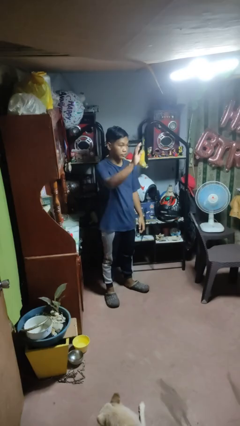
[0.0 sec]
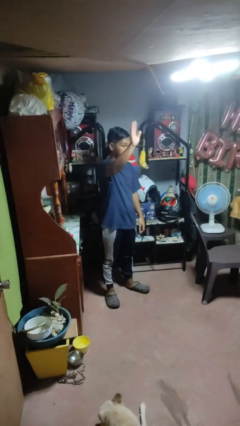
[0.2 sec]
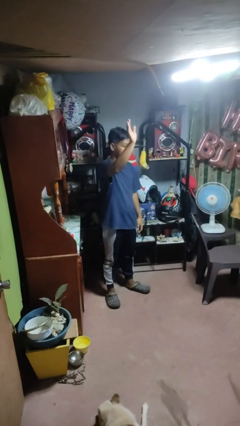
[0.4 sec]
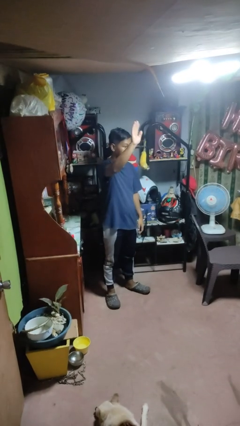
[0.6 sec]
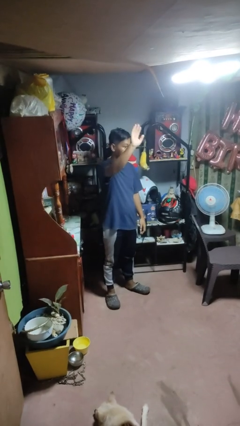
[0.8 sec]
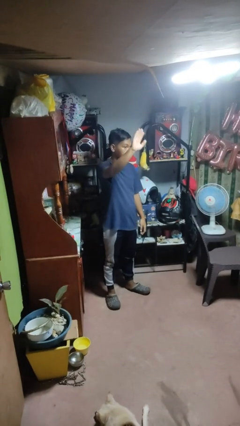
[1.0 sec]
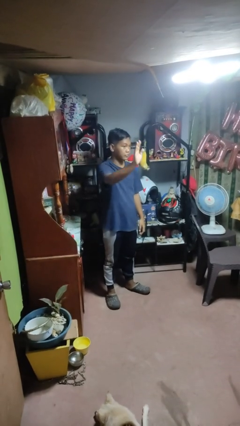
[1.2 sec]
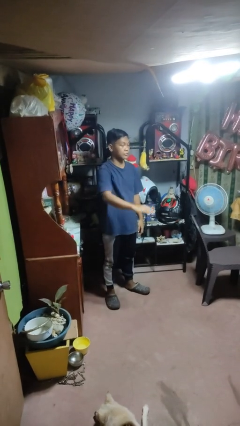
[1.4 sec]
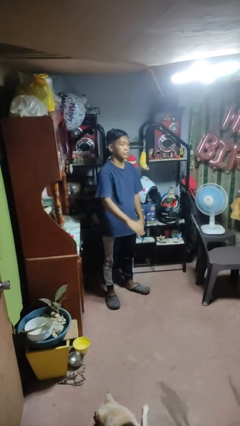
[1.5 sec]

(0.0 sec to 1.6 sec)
person waves at person

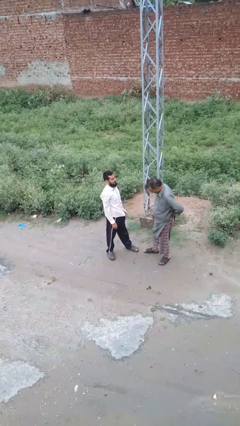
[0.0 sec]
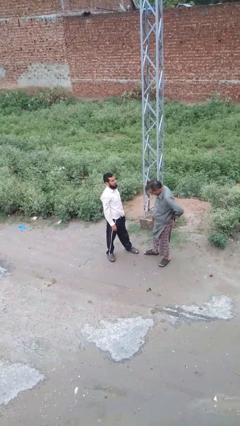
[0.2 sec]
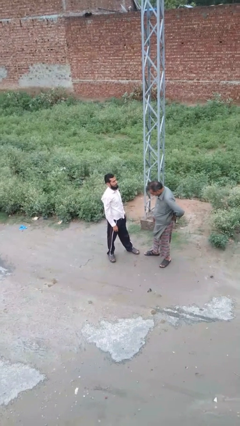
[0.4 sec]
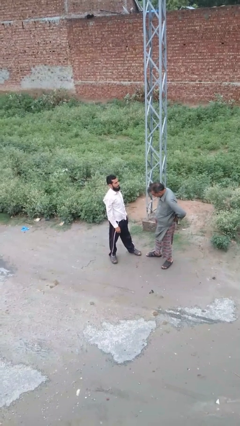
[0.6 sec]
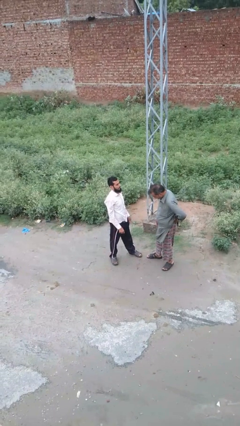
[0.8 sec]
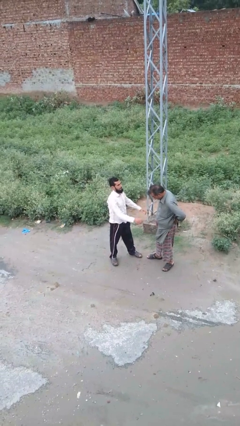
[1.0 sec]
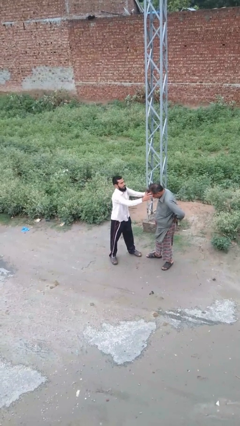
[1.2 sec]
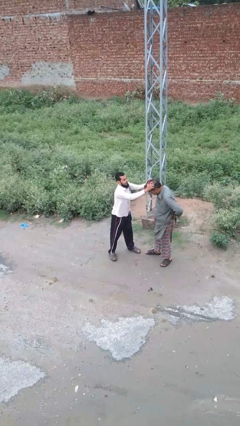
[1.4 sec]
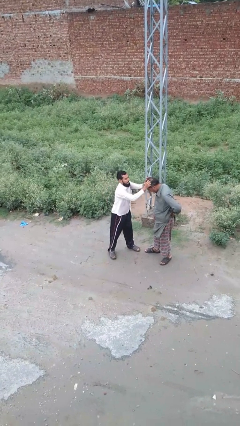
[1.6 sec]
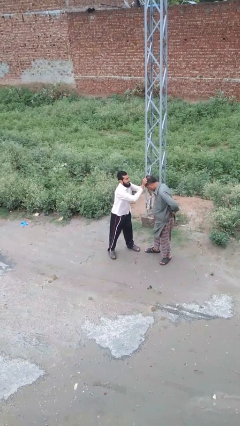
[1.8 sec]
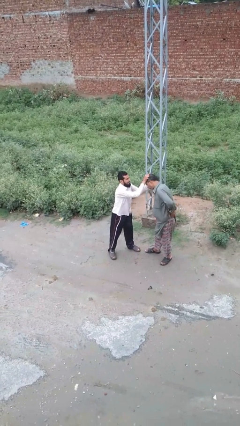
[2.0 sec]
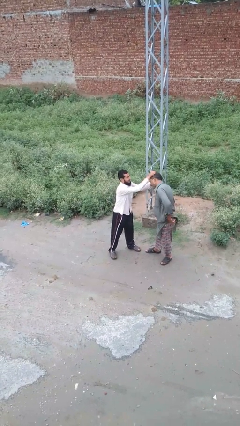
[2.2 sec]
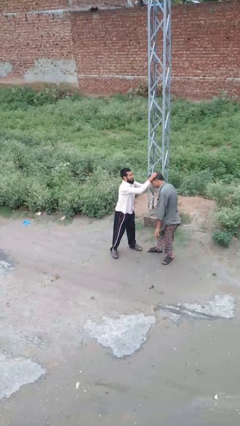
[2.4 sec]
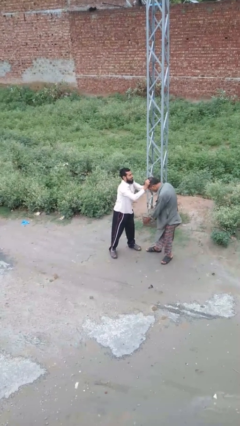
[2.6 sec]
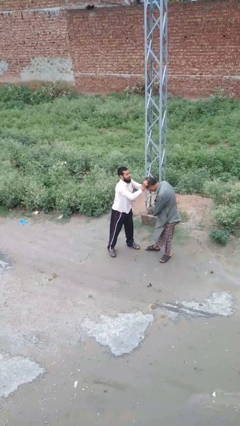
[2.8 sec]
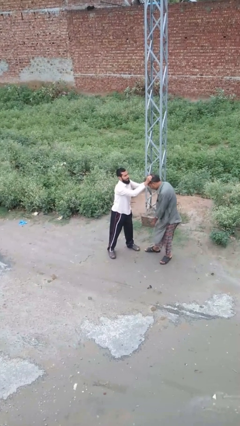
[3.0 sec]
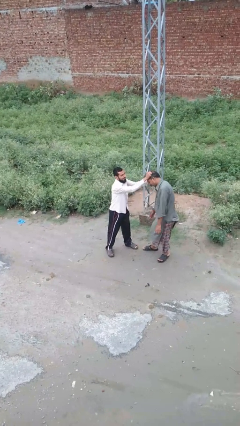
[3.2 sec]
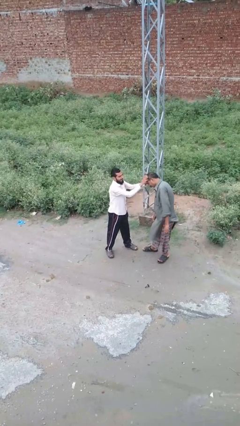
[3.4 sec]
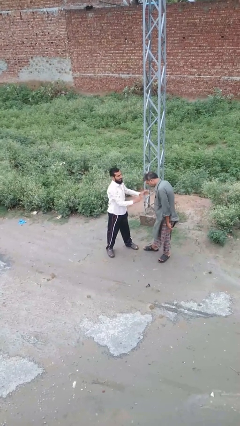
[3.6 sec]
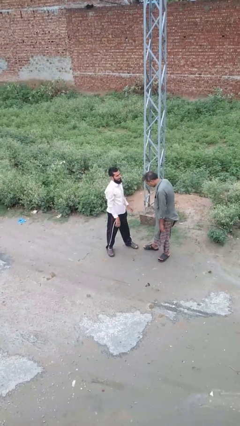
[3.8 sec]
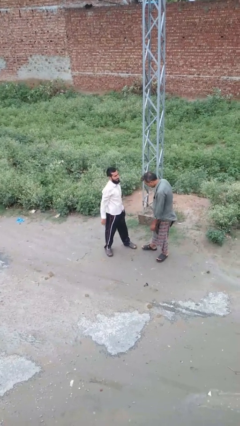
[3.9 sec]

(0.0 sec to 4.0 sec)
person grabs person by hair

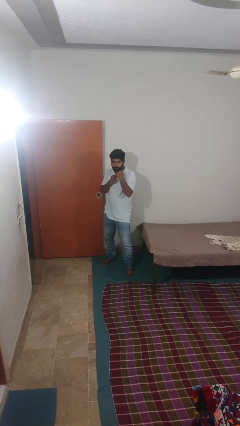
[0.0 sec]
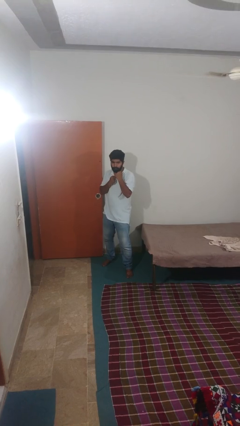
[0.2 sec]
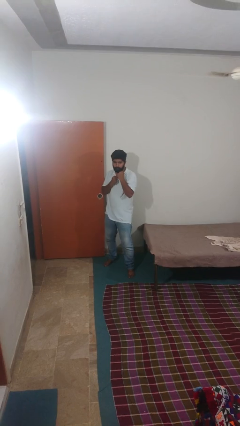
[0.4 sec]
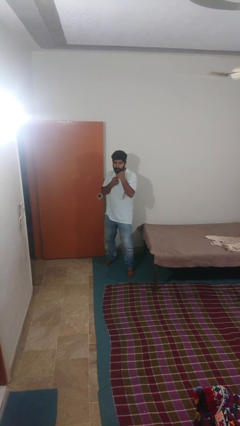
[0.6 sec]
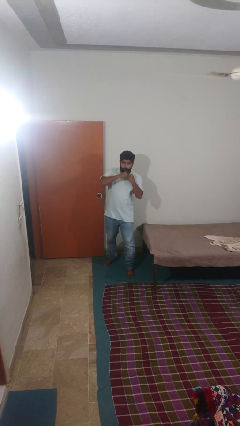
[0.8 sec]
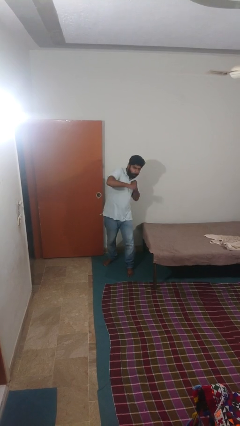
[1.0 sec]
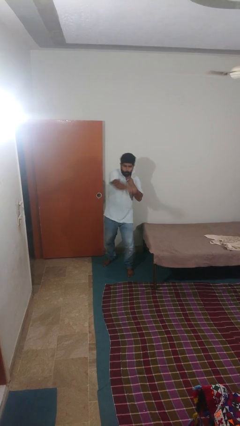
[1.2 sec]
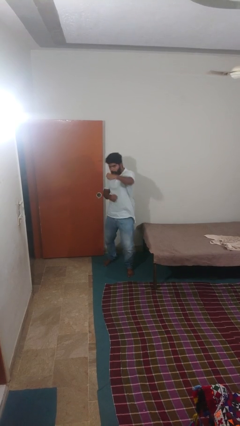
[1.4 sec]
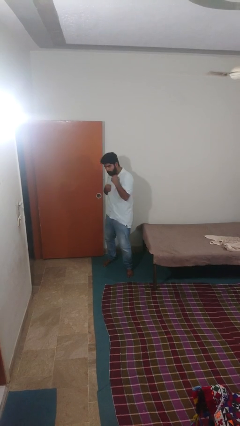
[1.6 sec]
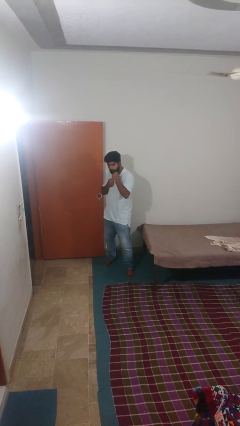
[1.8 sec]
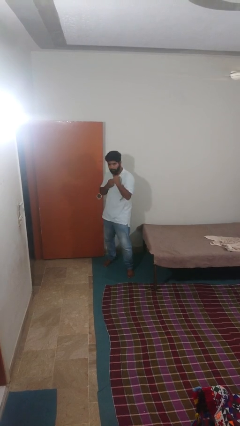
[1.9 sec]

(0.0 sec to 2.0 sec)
person punches

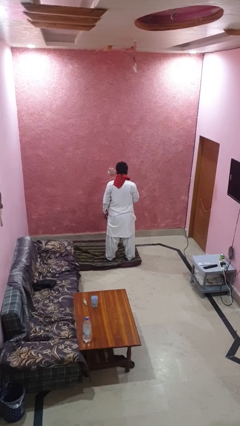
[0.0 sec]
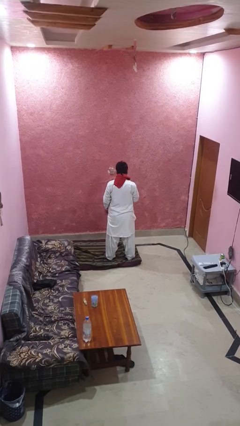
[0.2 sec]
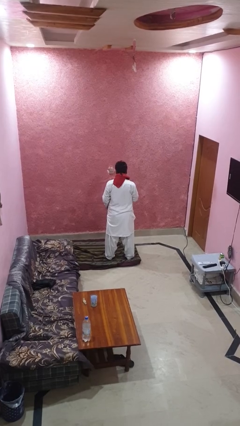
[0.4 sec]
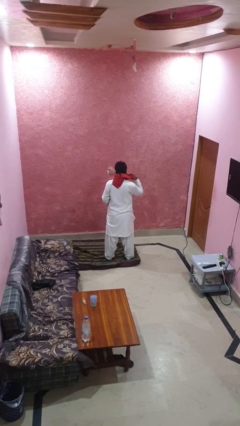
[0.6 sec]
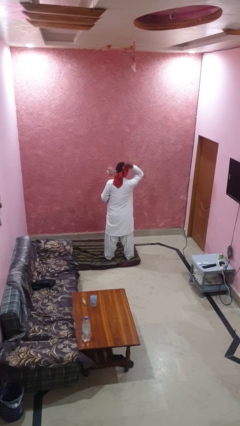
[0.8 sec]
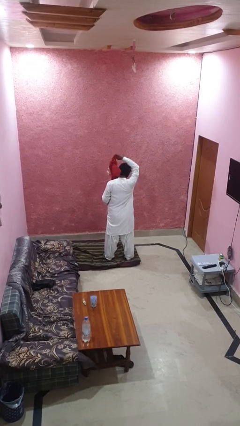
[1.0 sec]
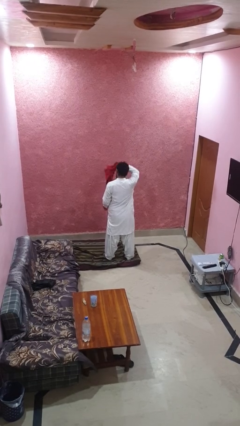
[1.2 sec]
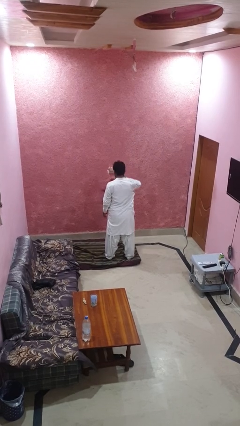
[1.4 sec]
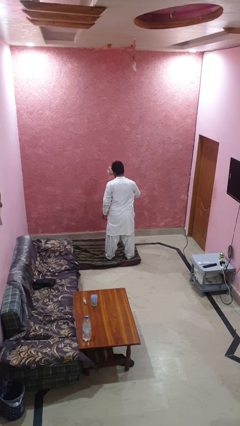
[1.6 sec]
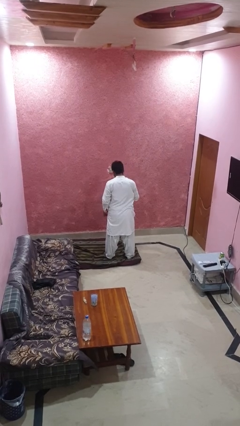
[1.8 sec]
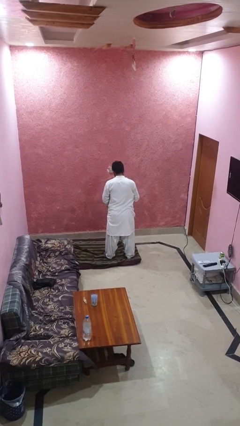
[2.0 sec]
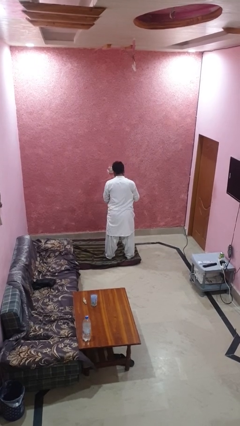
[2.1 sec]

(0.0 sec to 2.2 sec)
person takes off scarf

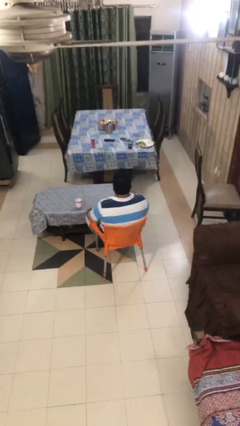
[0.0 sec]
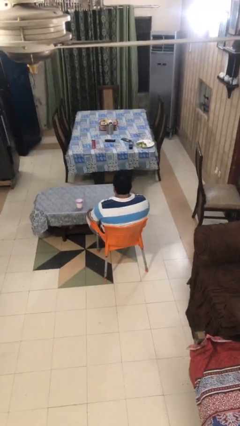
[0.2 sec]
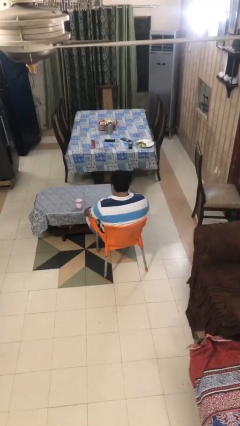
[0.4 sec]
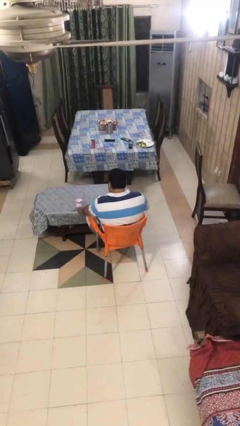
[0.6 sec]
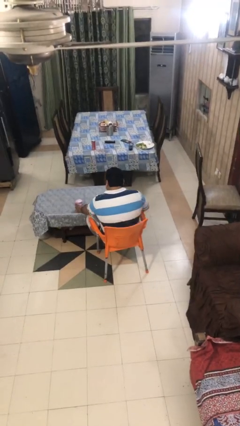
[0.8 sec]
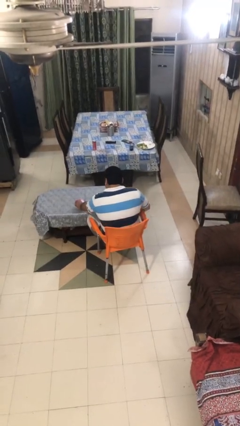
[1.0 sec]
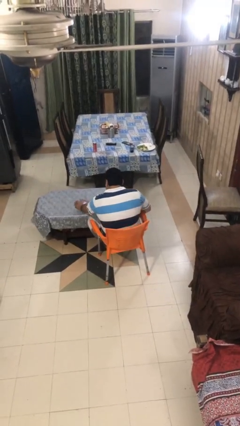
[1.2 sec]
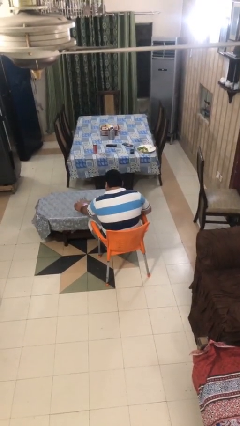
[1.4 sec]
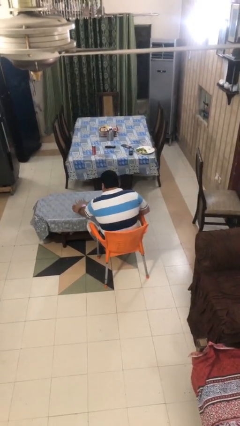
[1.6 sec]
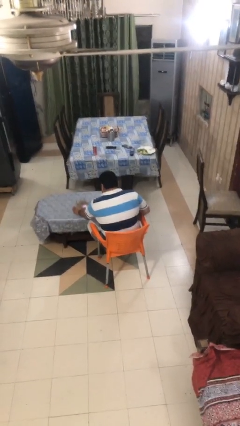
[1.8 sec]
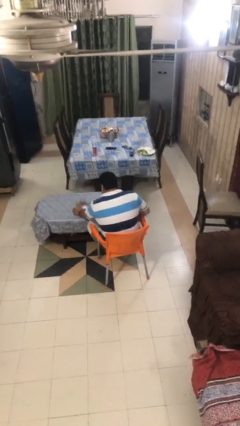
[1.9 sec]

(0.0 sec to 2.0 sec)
person spills on table

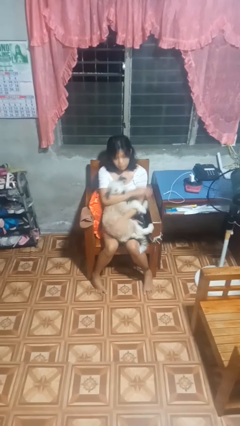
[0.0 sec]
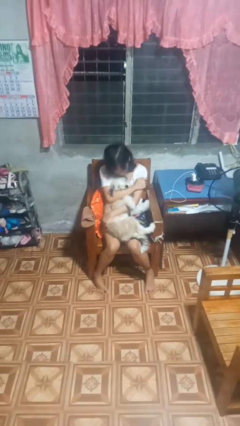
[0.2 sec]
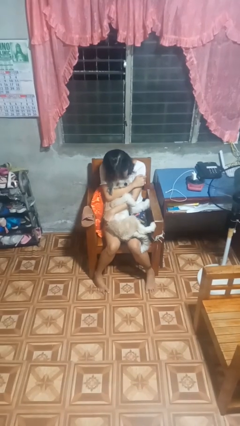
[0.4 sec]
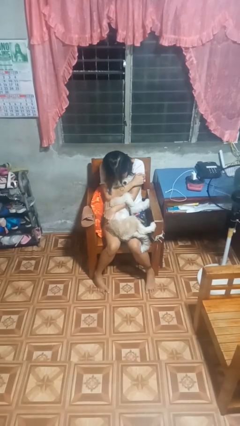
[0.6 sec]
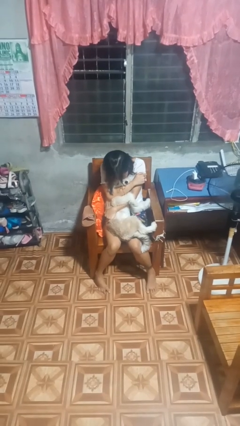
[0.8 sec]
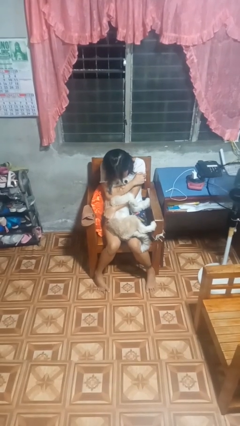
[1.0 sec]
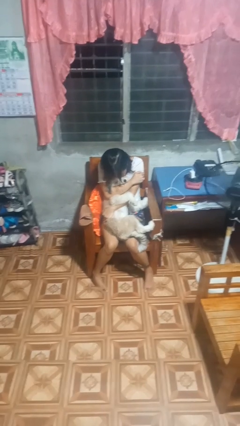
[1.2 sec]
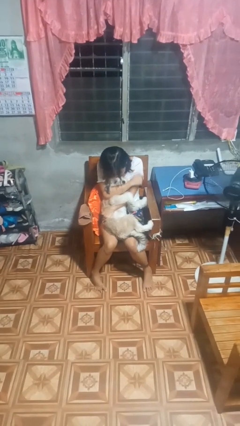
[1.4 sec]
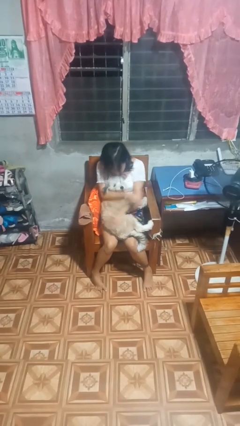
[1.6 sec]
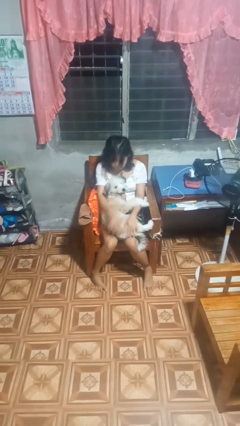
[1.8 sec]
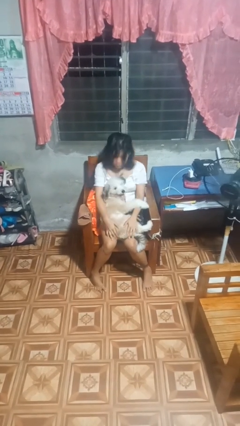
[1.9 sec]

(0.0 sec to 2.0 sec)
person hugs dog

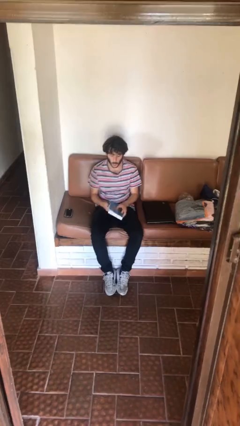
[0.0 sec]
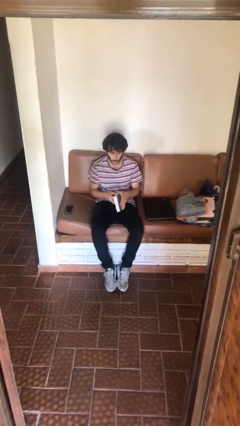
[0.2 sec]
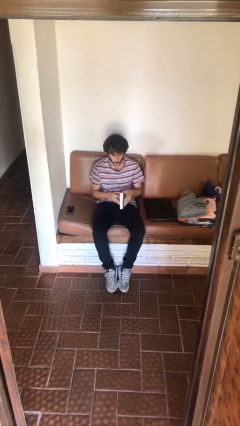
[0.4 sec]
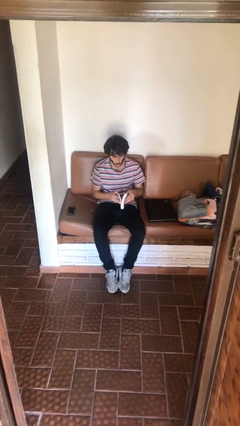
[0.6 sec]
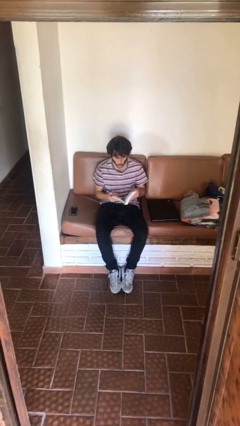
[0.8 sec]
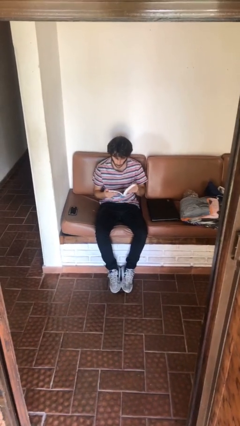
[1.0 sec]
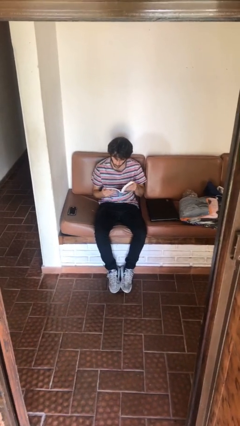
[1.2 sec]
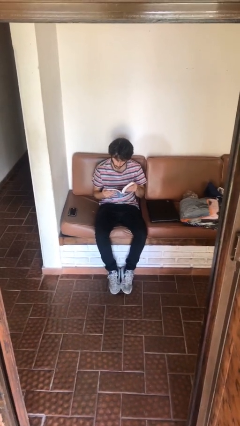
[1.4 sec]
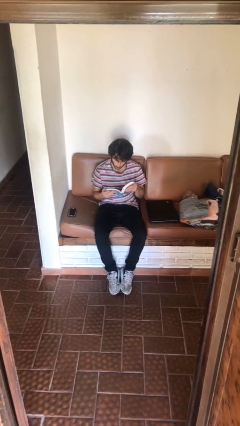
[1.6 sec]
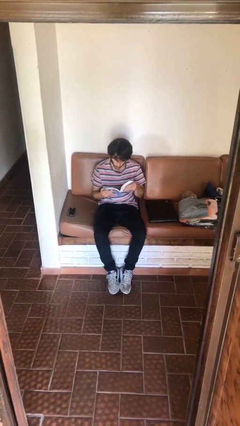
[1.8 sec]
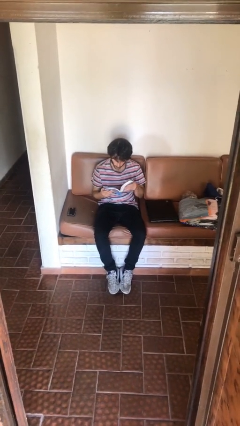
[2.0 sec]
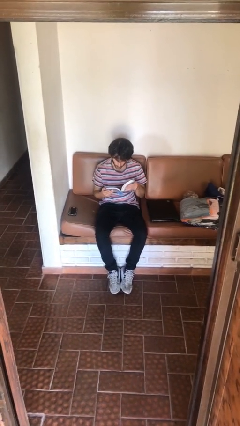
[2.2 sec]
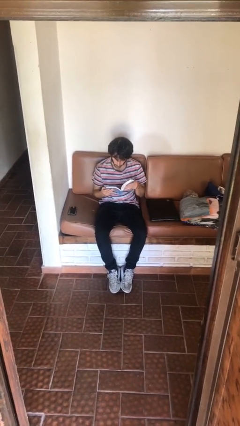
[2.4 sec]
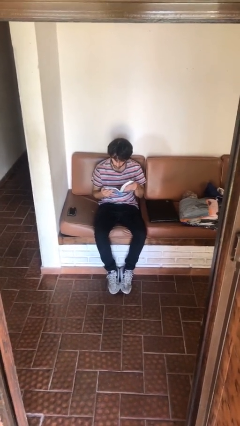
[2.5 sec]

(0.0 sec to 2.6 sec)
person reads document

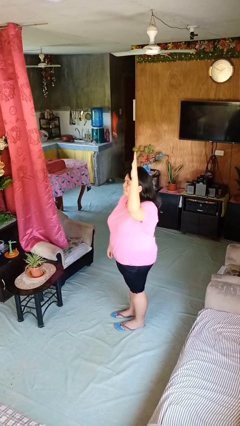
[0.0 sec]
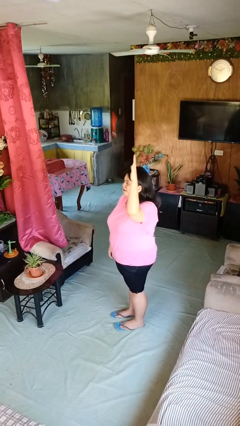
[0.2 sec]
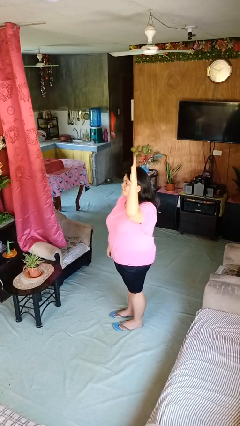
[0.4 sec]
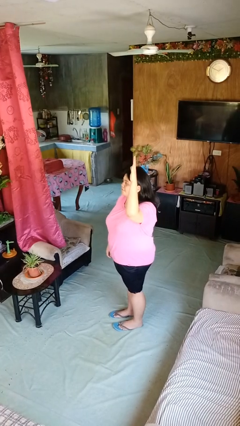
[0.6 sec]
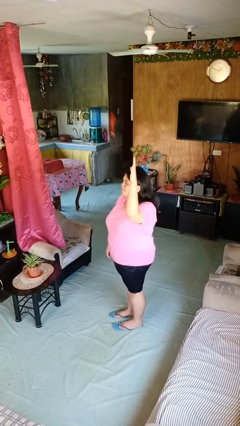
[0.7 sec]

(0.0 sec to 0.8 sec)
person gestures raise hand

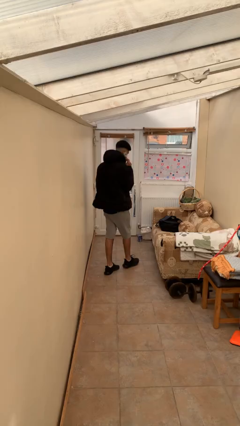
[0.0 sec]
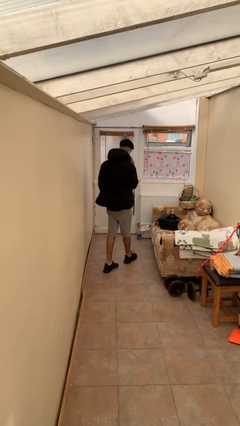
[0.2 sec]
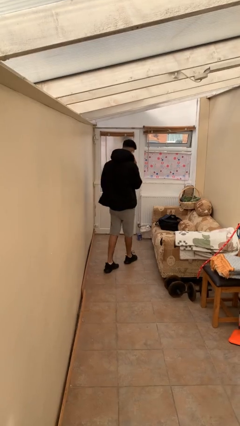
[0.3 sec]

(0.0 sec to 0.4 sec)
person opens facility door
